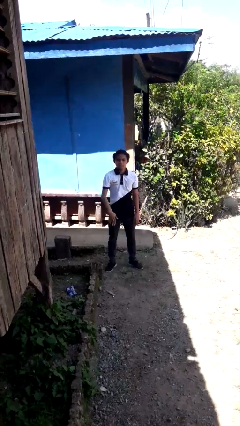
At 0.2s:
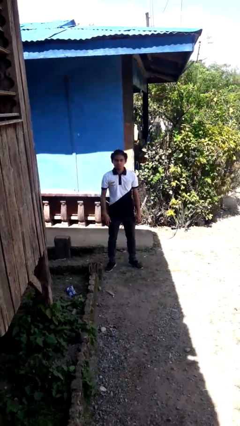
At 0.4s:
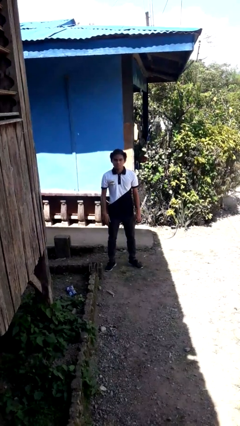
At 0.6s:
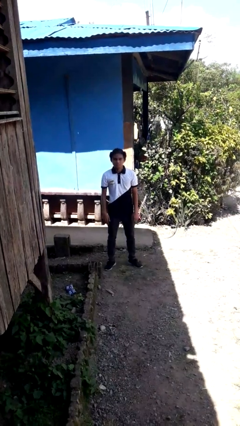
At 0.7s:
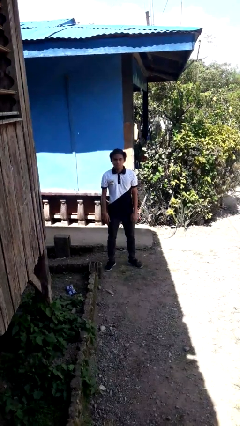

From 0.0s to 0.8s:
person gestures swipe down

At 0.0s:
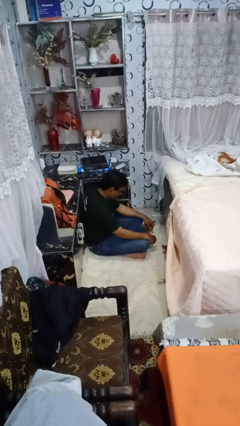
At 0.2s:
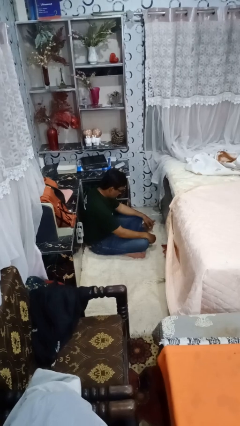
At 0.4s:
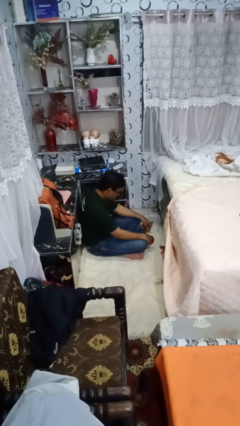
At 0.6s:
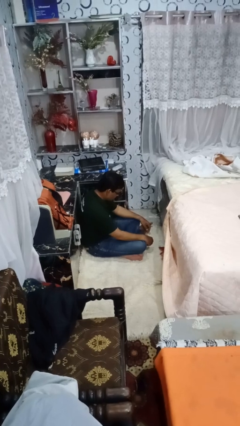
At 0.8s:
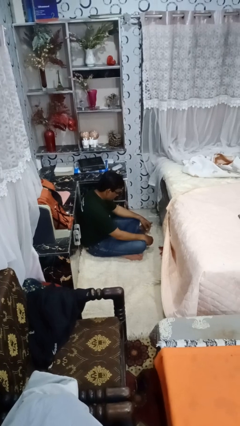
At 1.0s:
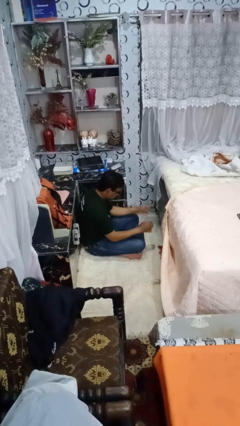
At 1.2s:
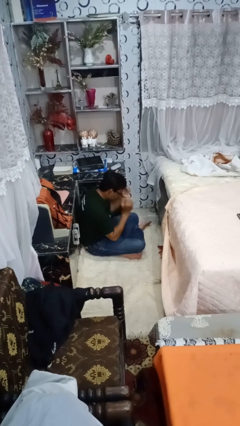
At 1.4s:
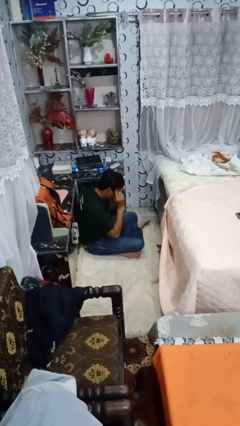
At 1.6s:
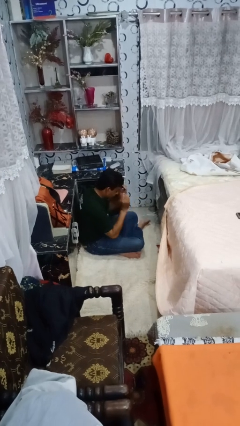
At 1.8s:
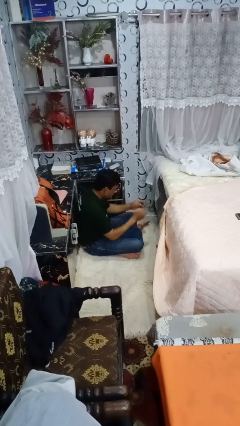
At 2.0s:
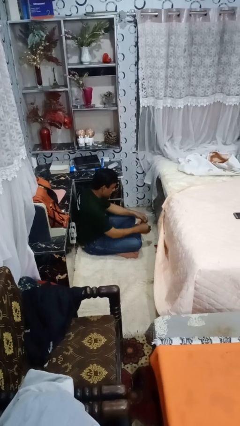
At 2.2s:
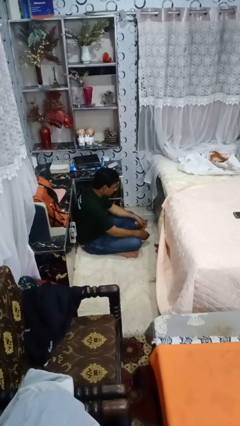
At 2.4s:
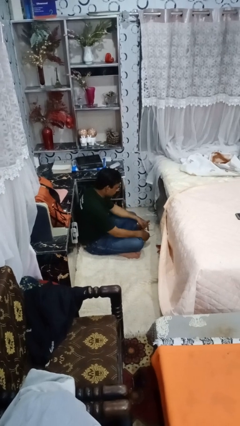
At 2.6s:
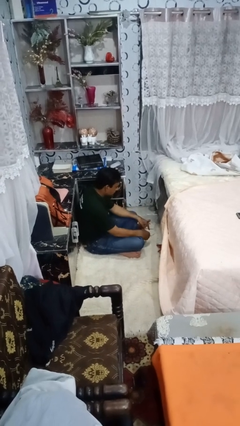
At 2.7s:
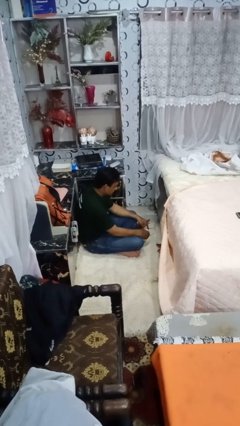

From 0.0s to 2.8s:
person takes off glasses

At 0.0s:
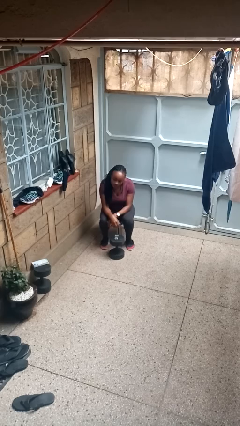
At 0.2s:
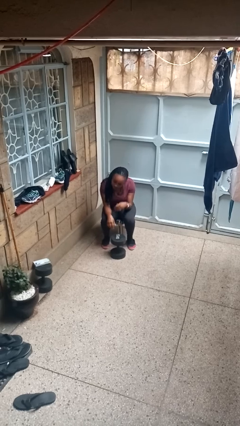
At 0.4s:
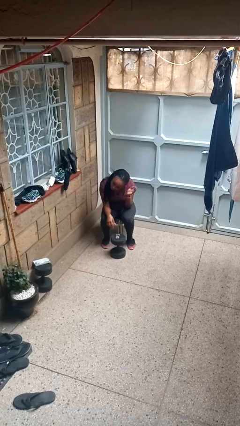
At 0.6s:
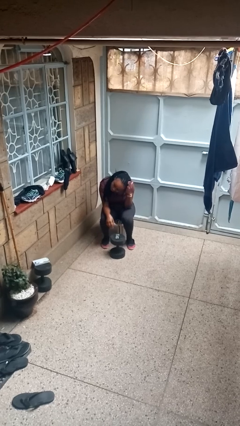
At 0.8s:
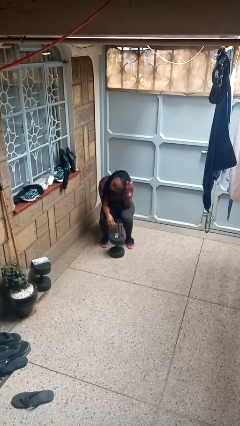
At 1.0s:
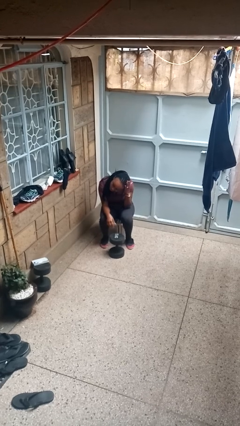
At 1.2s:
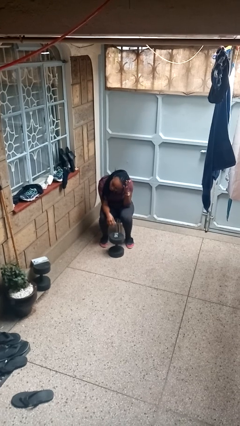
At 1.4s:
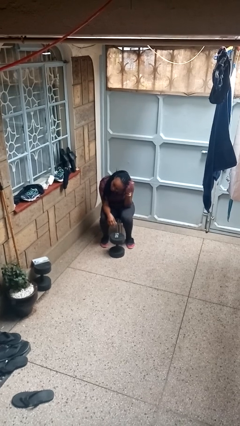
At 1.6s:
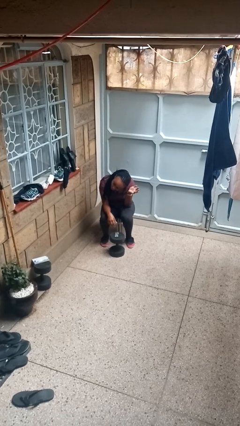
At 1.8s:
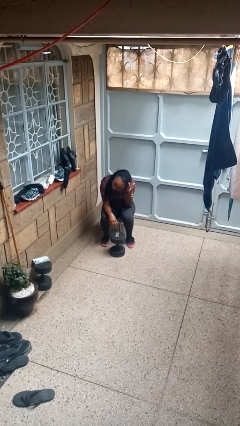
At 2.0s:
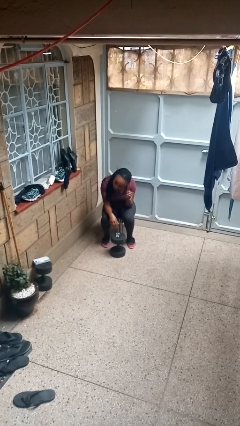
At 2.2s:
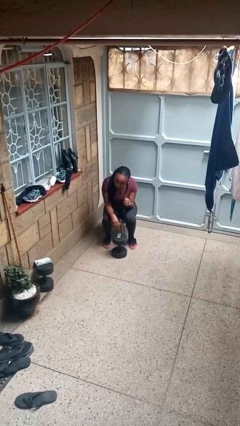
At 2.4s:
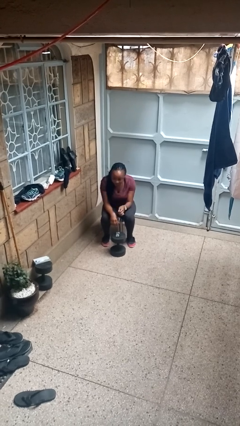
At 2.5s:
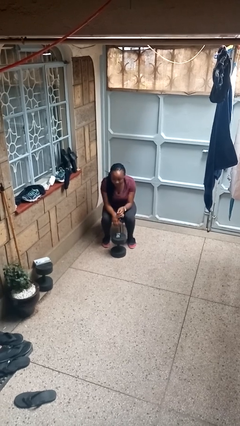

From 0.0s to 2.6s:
person pats head

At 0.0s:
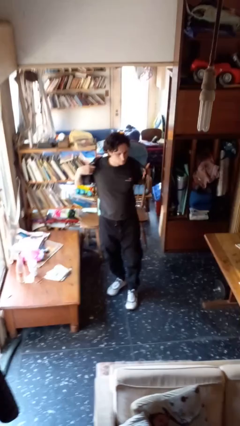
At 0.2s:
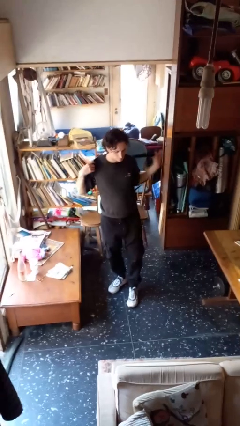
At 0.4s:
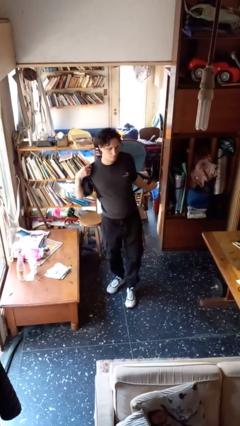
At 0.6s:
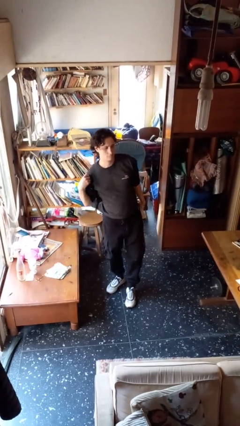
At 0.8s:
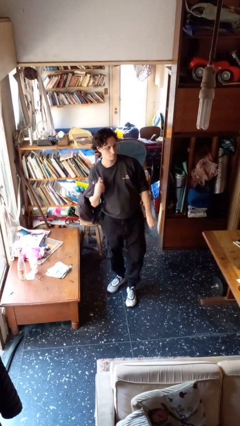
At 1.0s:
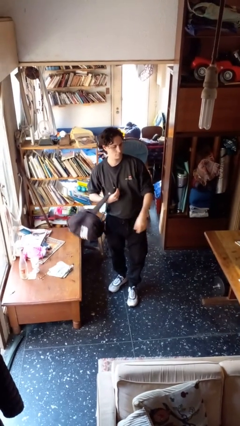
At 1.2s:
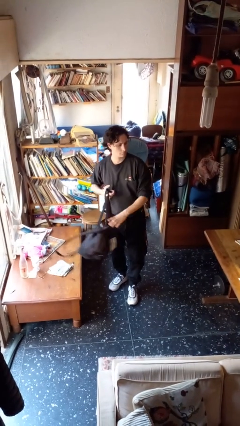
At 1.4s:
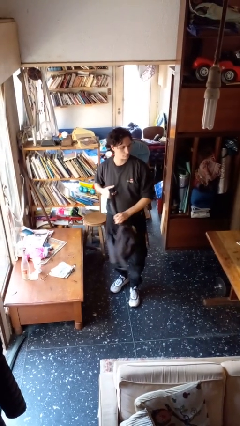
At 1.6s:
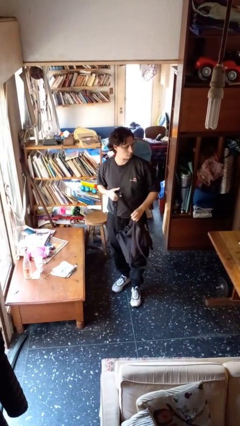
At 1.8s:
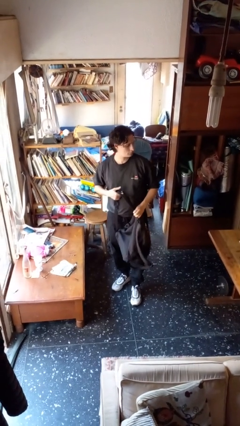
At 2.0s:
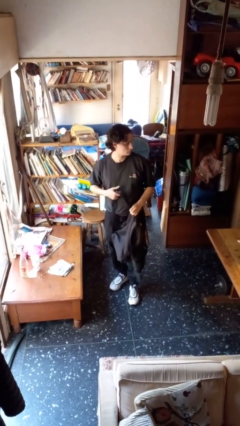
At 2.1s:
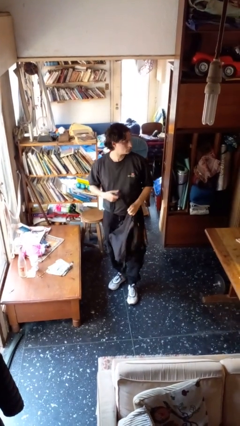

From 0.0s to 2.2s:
person takes off backpack

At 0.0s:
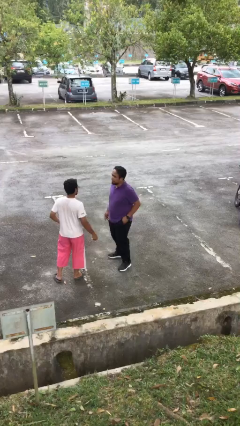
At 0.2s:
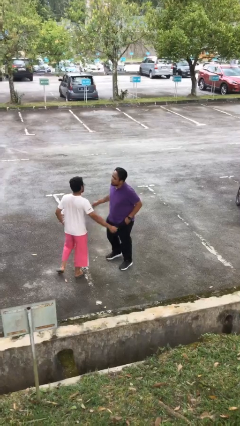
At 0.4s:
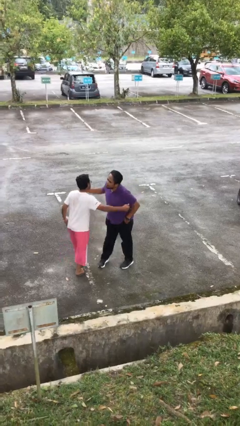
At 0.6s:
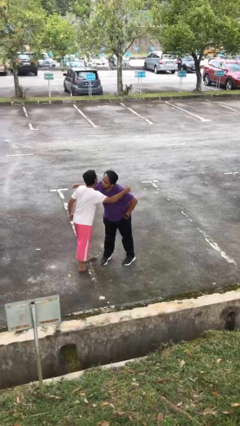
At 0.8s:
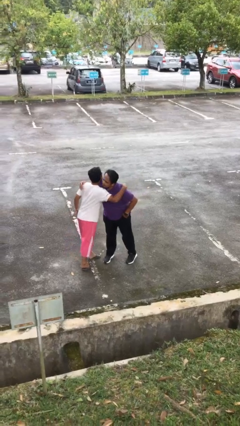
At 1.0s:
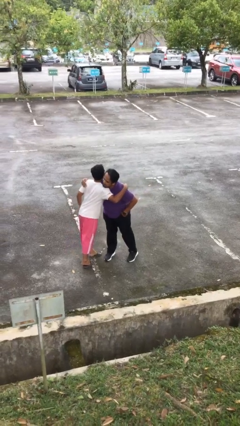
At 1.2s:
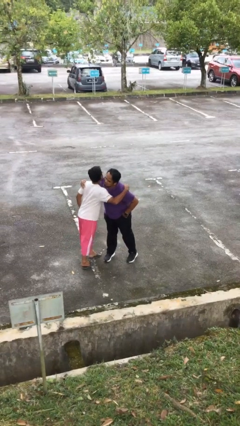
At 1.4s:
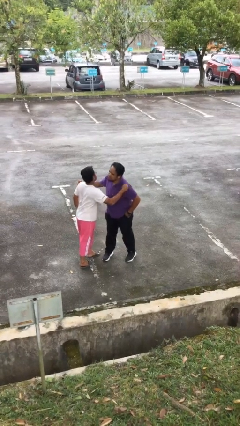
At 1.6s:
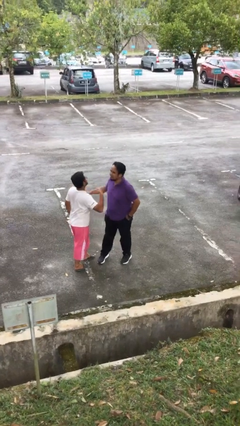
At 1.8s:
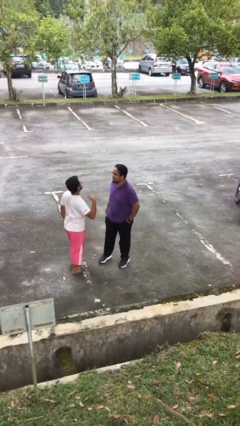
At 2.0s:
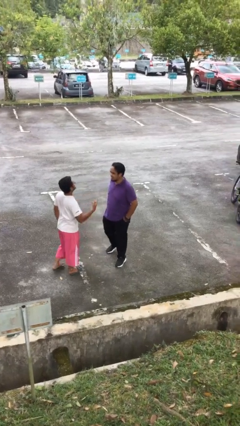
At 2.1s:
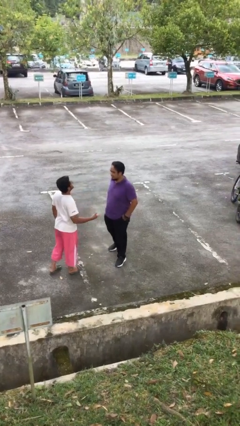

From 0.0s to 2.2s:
person embraces person

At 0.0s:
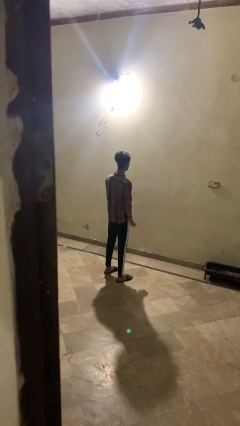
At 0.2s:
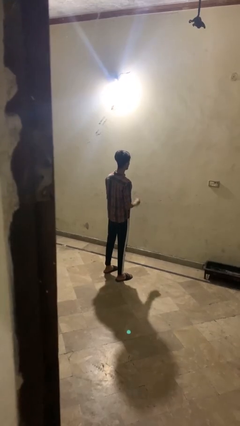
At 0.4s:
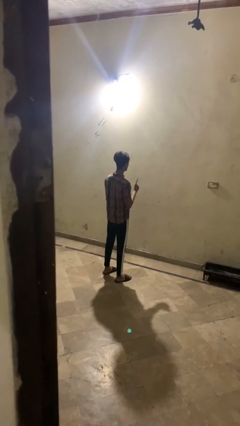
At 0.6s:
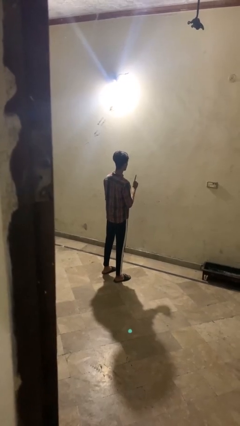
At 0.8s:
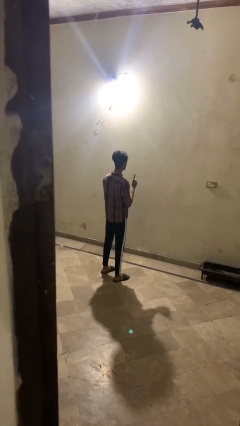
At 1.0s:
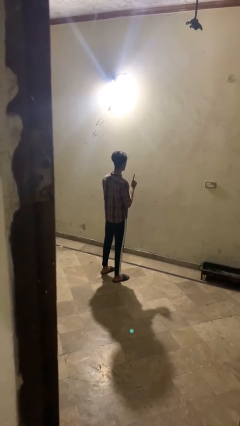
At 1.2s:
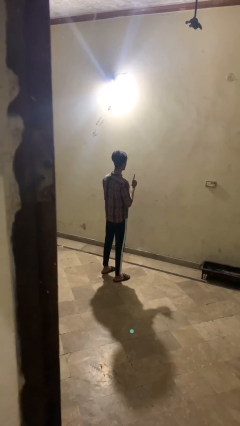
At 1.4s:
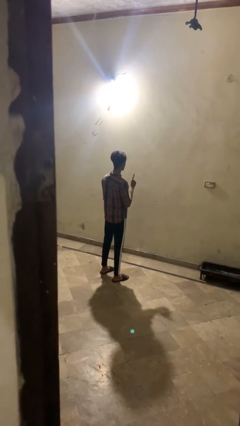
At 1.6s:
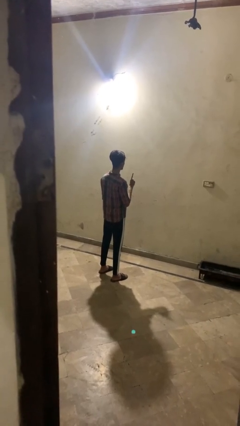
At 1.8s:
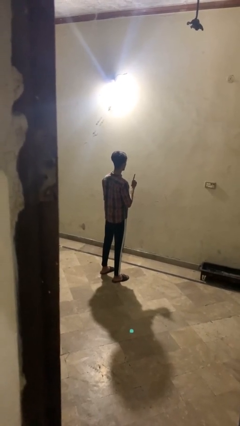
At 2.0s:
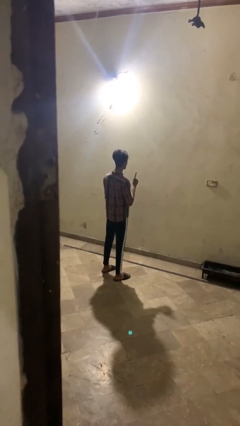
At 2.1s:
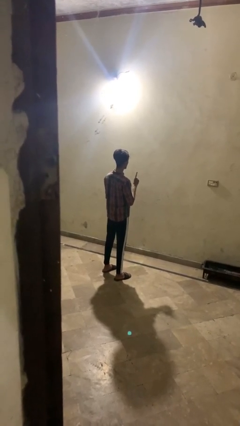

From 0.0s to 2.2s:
person gestures number one

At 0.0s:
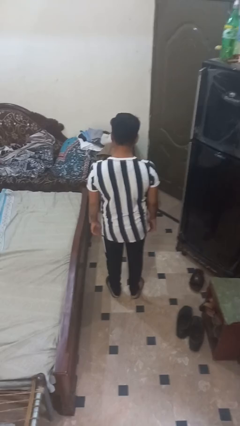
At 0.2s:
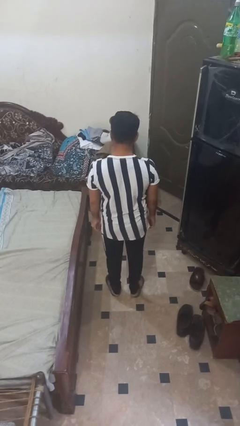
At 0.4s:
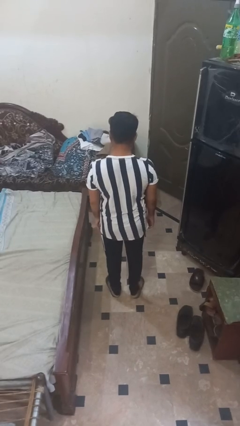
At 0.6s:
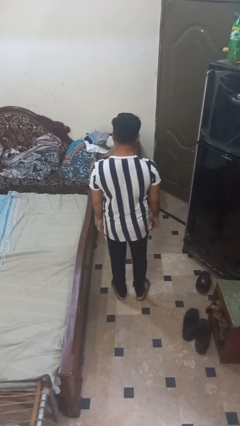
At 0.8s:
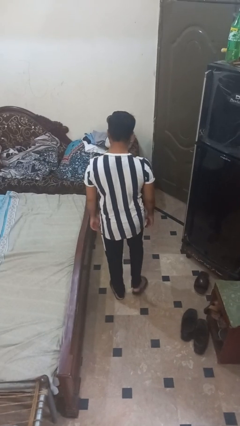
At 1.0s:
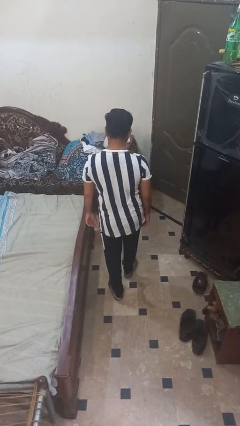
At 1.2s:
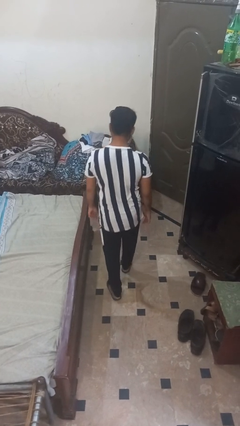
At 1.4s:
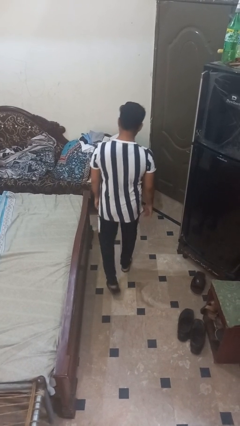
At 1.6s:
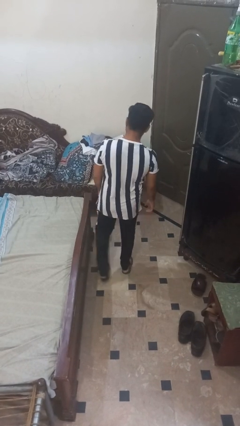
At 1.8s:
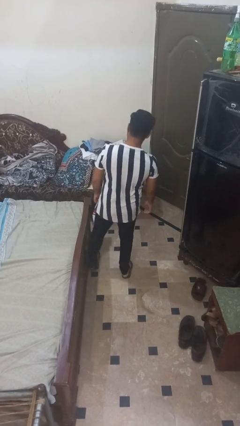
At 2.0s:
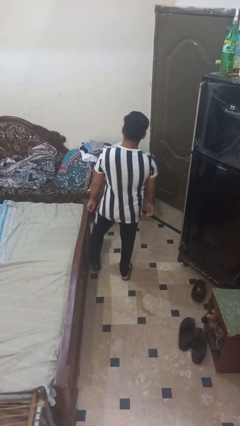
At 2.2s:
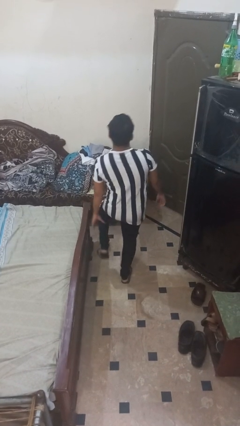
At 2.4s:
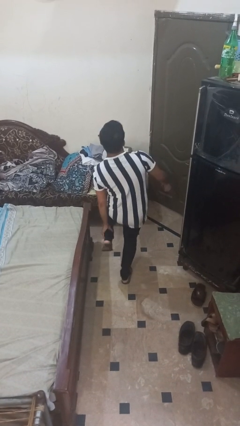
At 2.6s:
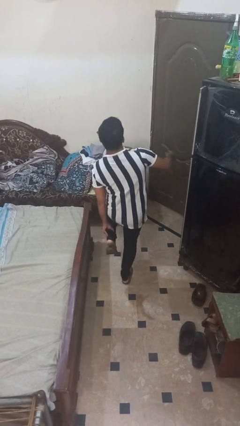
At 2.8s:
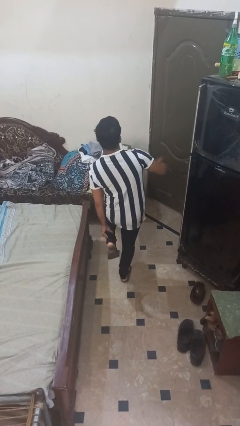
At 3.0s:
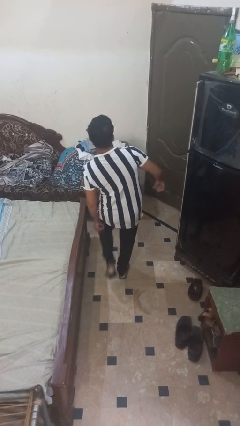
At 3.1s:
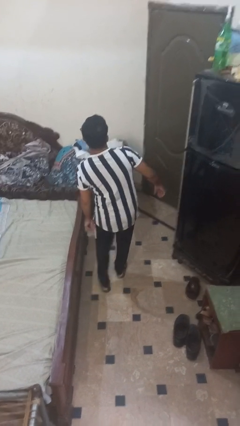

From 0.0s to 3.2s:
person stubs toe

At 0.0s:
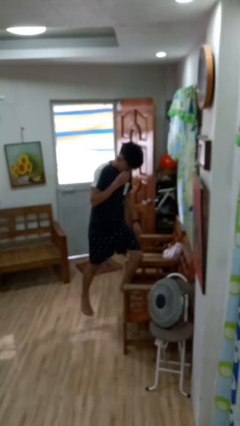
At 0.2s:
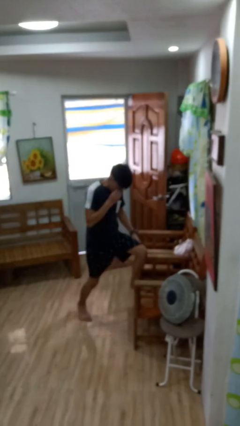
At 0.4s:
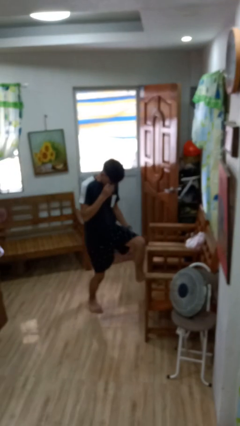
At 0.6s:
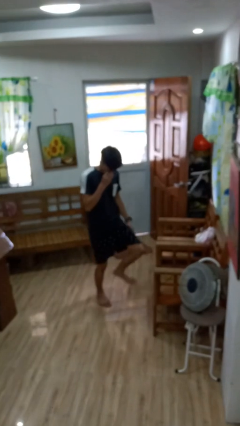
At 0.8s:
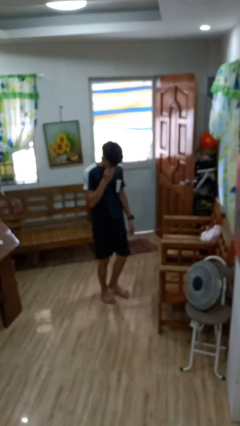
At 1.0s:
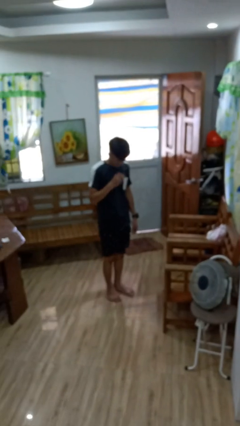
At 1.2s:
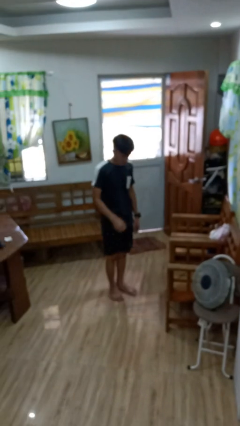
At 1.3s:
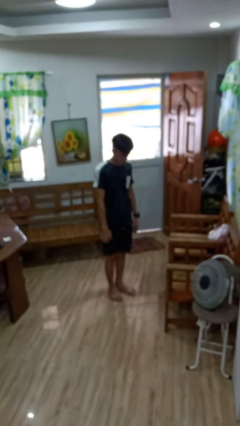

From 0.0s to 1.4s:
person climbs off chair
